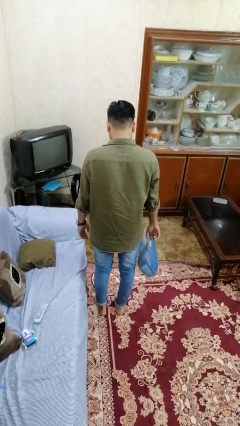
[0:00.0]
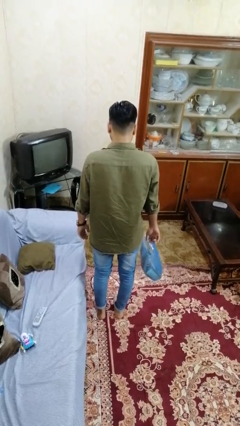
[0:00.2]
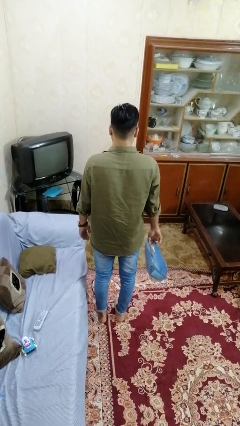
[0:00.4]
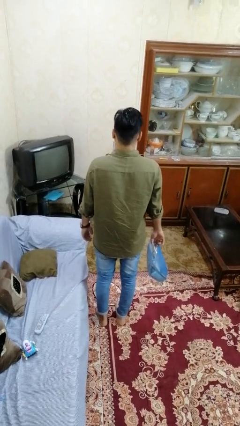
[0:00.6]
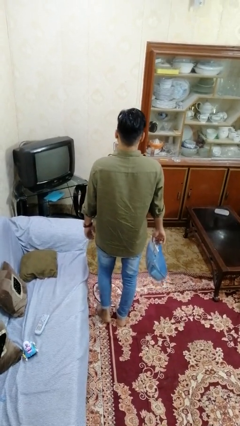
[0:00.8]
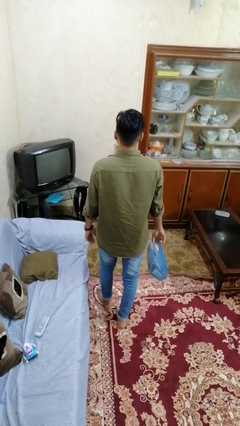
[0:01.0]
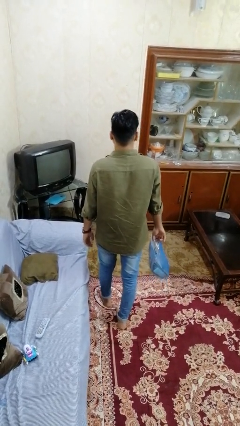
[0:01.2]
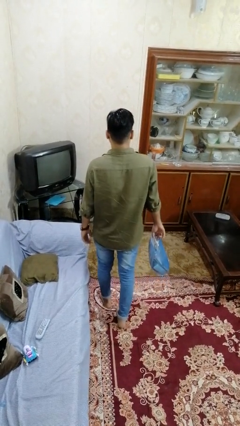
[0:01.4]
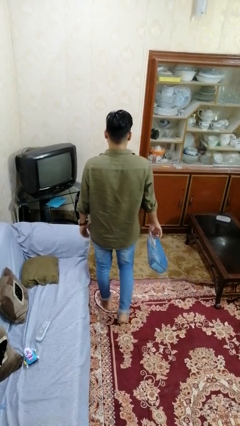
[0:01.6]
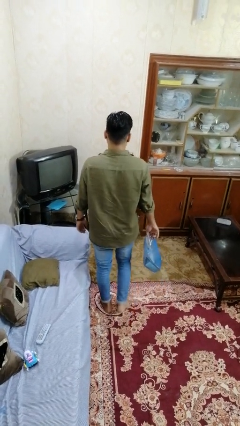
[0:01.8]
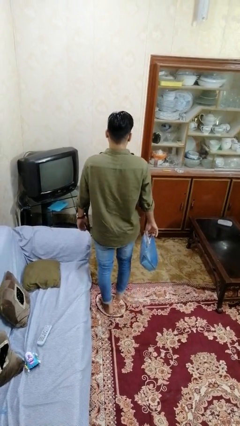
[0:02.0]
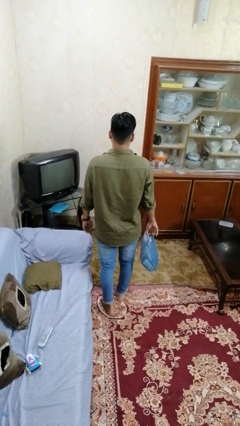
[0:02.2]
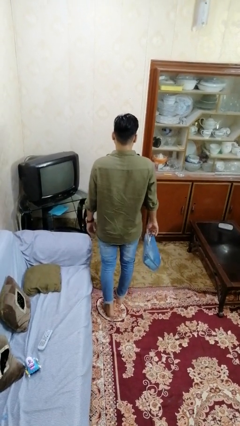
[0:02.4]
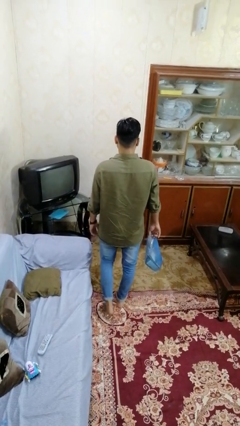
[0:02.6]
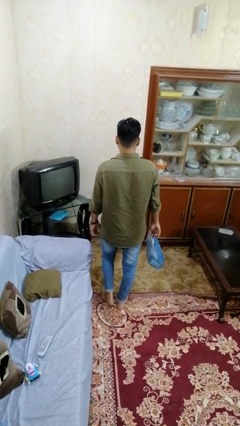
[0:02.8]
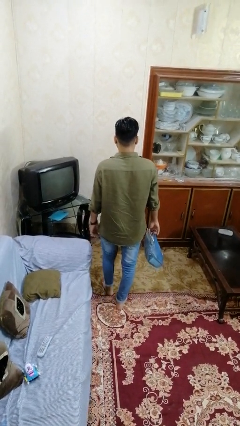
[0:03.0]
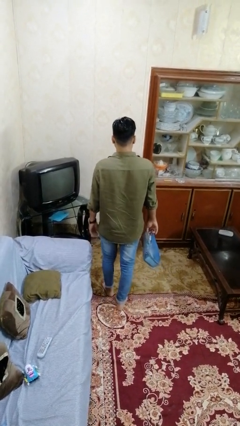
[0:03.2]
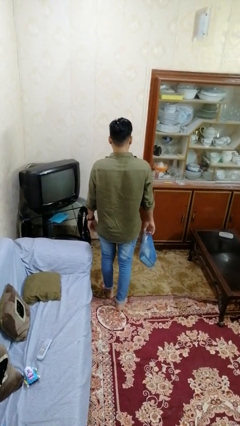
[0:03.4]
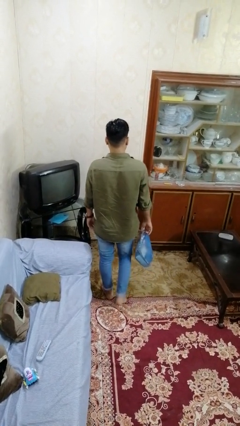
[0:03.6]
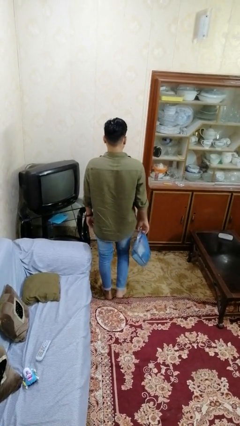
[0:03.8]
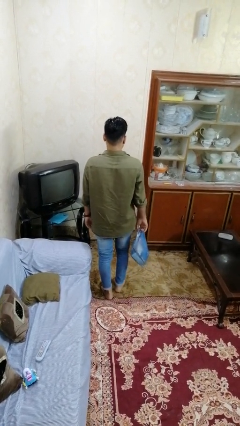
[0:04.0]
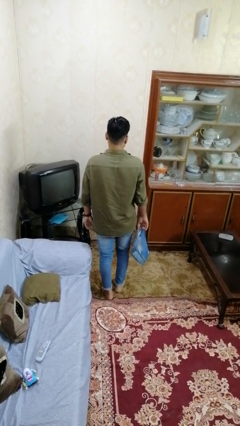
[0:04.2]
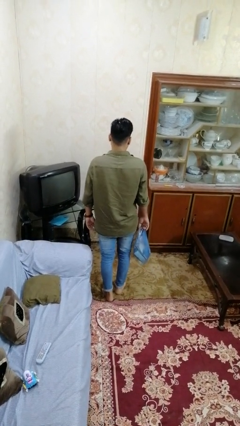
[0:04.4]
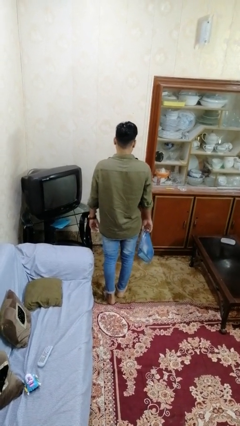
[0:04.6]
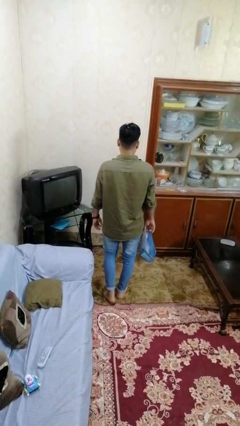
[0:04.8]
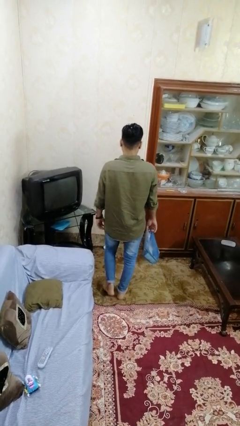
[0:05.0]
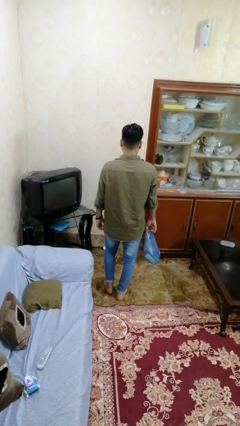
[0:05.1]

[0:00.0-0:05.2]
person carries groceries

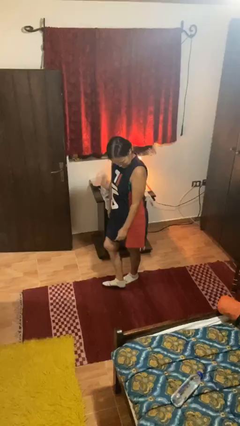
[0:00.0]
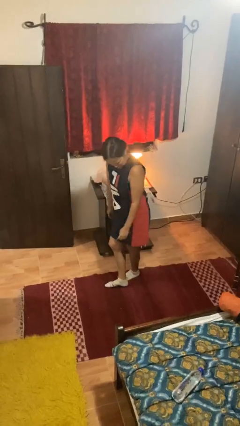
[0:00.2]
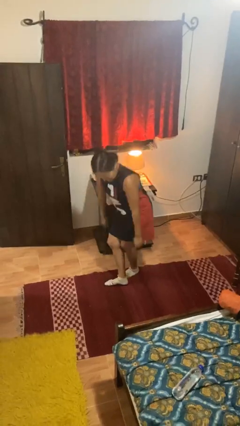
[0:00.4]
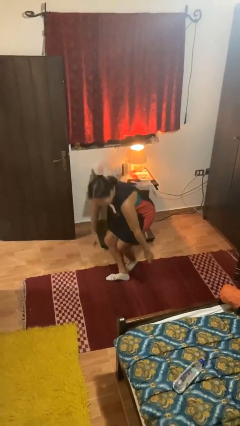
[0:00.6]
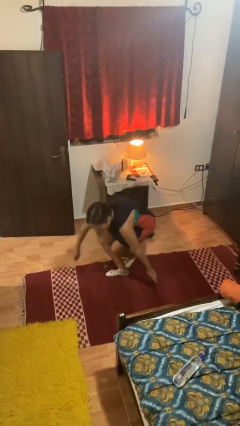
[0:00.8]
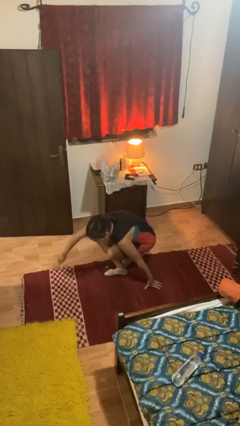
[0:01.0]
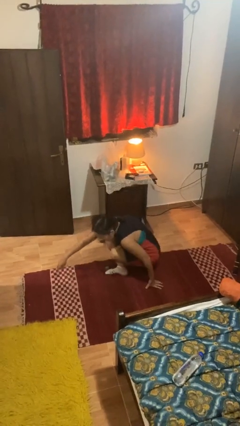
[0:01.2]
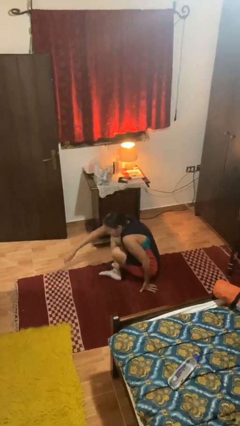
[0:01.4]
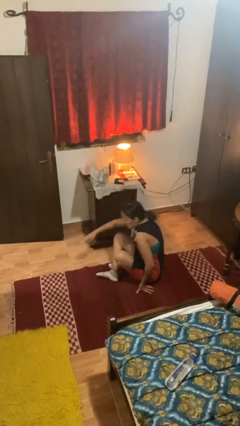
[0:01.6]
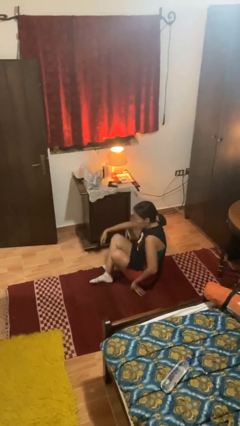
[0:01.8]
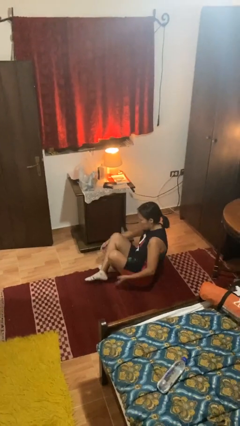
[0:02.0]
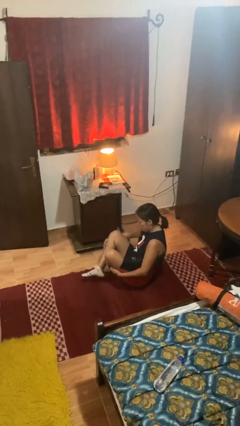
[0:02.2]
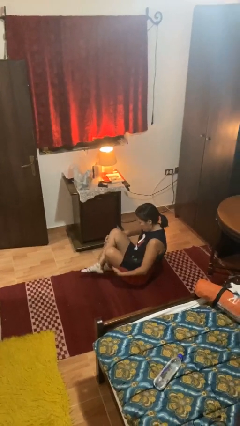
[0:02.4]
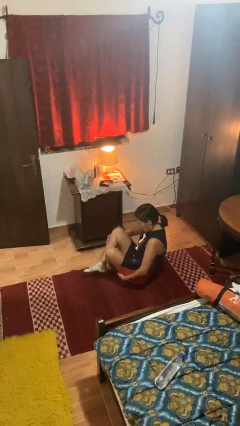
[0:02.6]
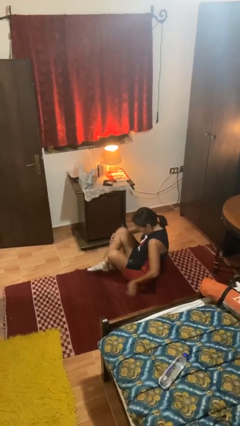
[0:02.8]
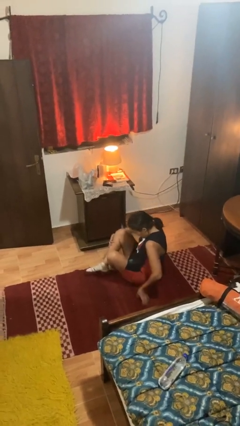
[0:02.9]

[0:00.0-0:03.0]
person sits crisscross

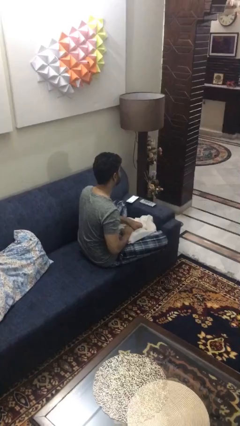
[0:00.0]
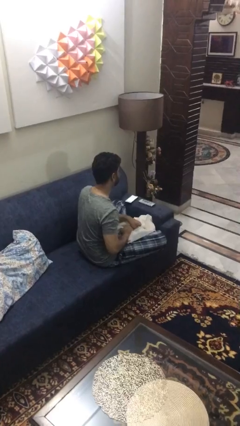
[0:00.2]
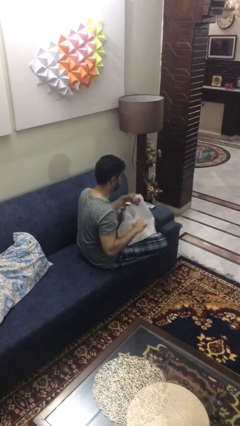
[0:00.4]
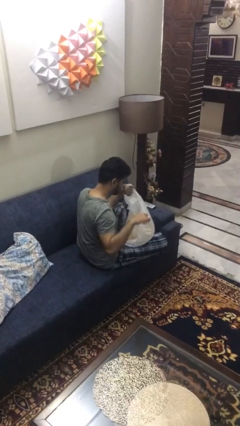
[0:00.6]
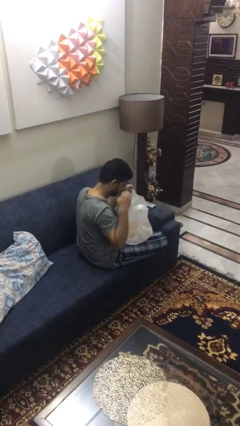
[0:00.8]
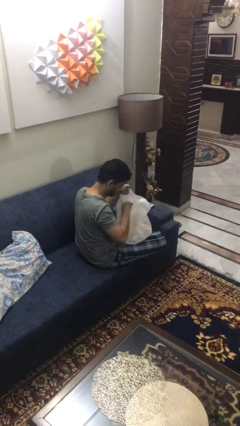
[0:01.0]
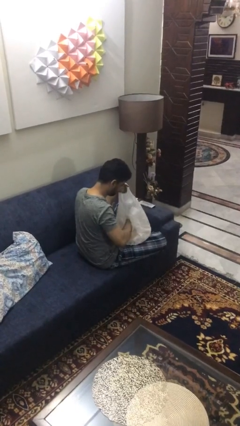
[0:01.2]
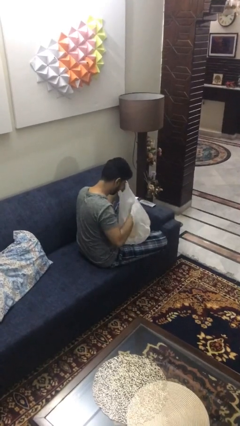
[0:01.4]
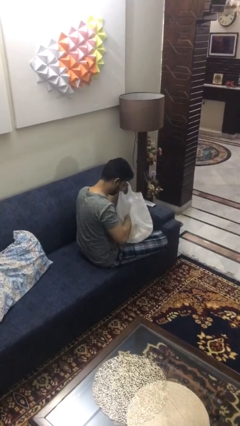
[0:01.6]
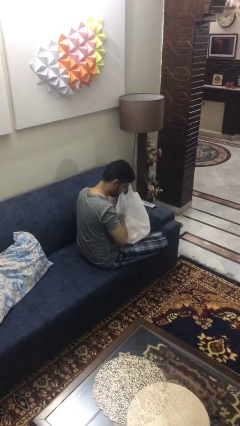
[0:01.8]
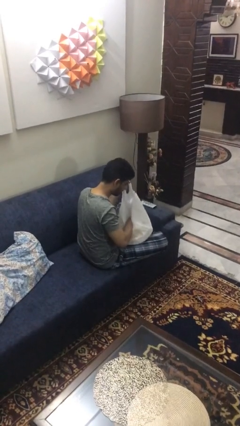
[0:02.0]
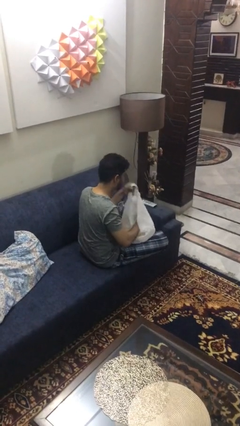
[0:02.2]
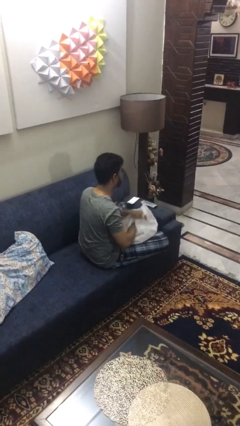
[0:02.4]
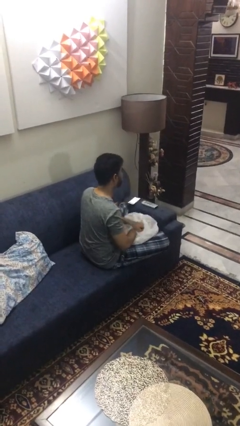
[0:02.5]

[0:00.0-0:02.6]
person searches in bag

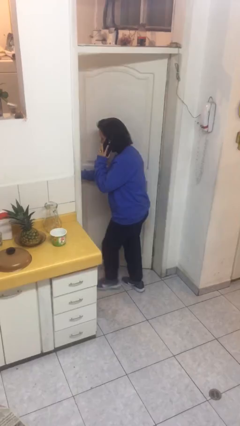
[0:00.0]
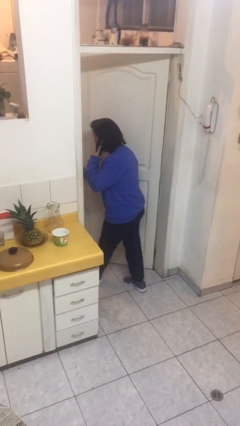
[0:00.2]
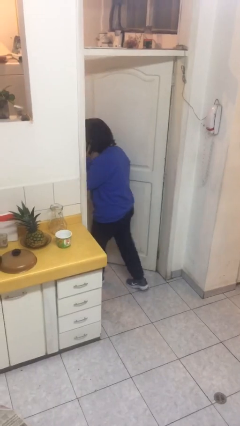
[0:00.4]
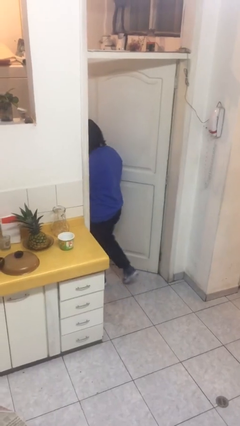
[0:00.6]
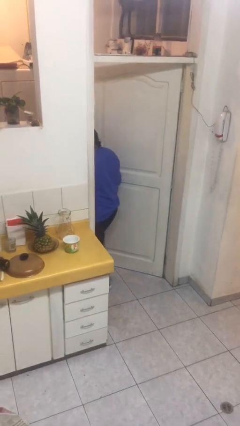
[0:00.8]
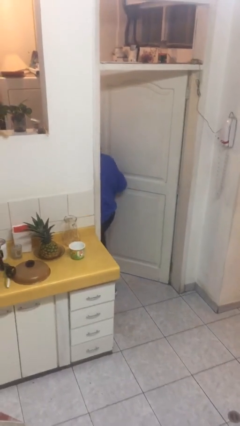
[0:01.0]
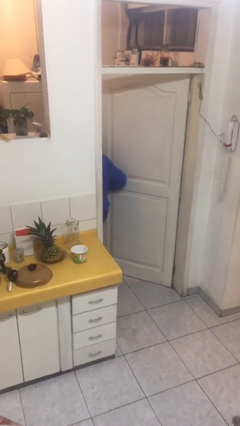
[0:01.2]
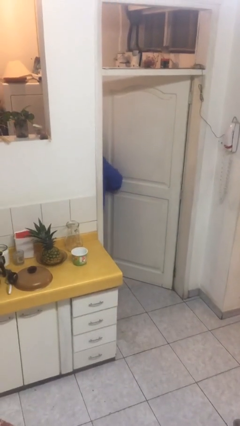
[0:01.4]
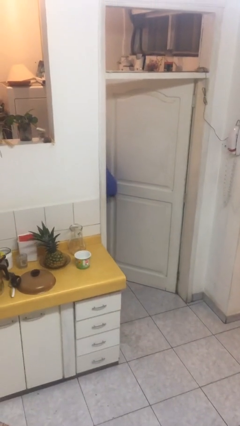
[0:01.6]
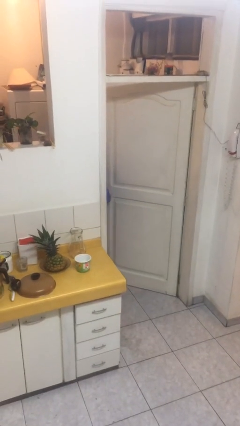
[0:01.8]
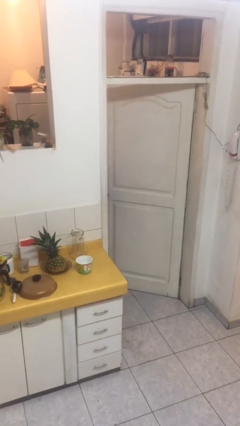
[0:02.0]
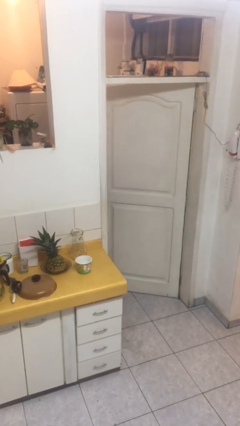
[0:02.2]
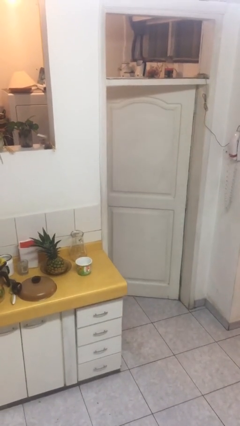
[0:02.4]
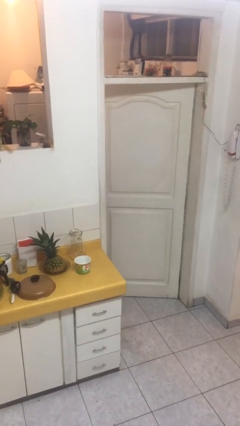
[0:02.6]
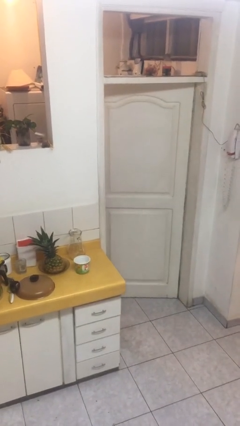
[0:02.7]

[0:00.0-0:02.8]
person exits scene through structure

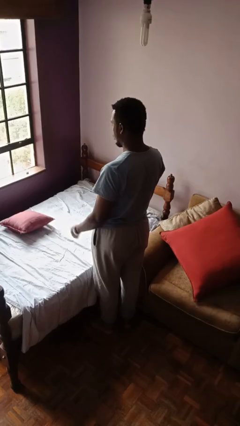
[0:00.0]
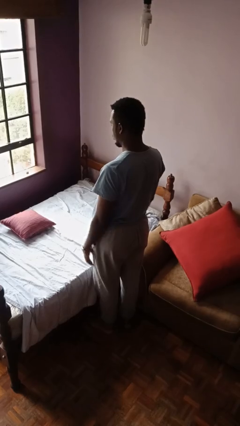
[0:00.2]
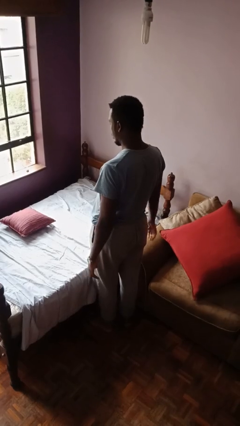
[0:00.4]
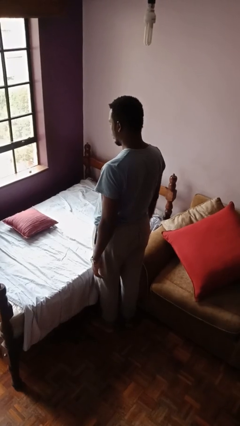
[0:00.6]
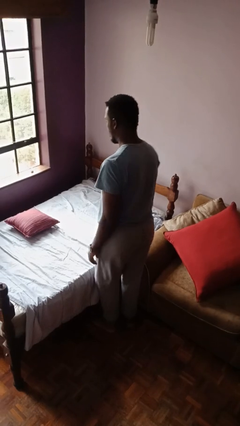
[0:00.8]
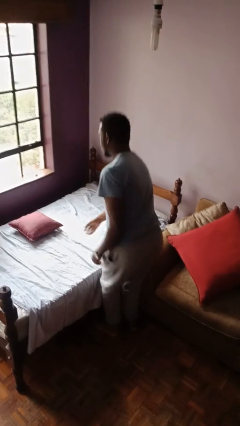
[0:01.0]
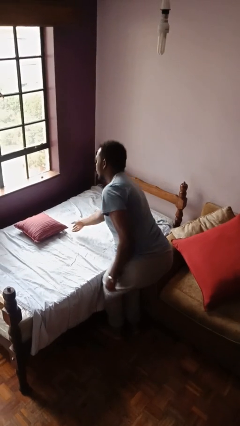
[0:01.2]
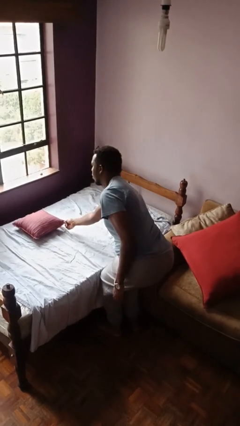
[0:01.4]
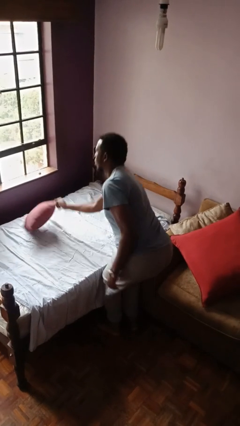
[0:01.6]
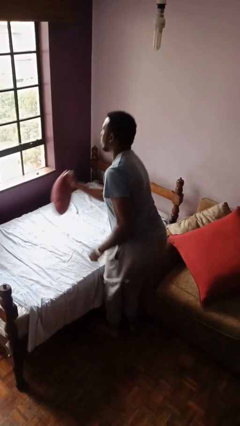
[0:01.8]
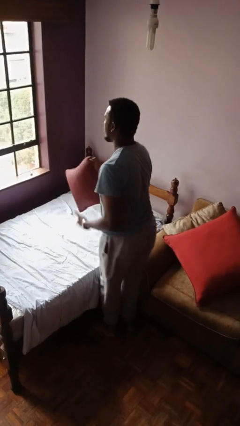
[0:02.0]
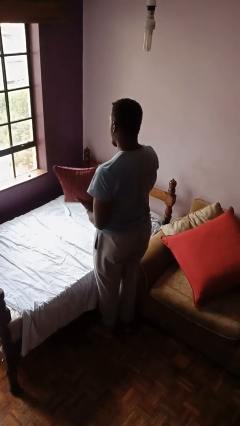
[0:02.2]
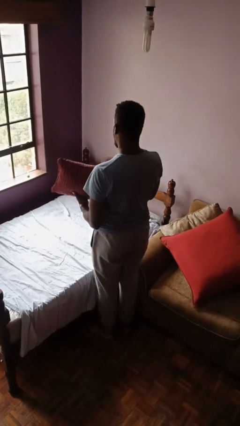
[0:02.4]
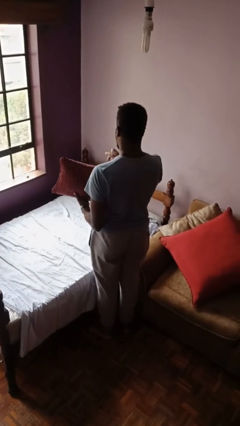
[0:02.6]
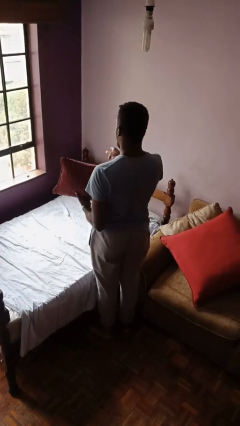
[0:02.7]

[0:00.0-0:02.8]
person picks up object from bed

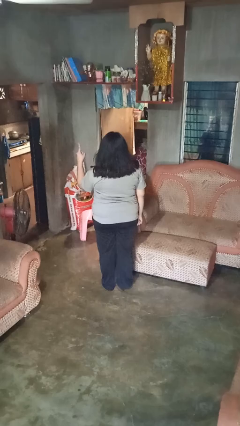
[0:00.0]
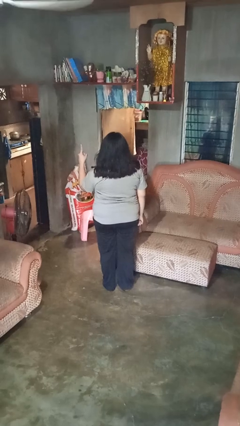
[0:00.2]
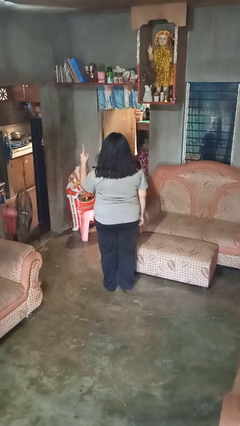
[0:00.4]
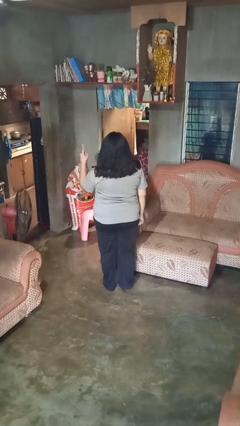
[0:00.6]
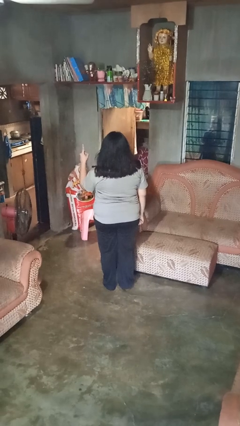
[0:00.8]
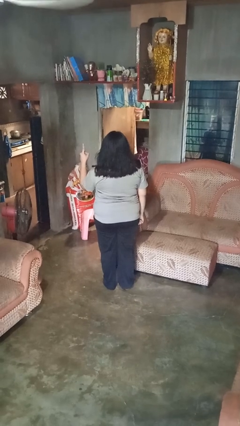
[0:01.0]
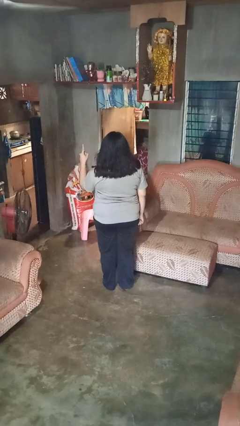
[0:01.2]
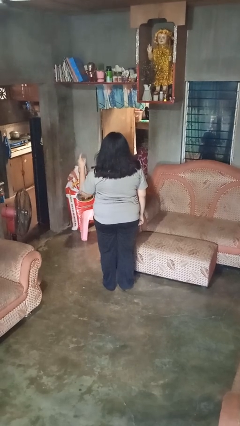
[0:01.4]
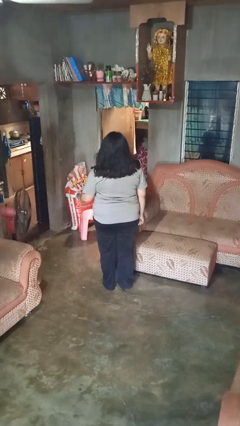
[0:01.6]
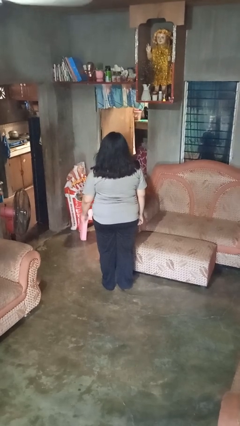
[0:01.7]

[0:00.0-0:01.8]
person gestures number one
